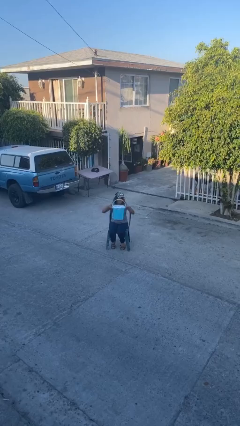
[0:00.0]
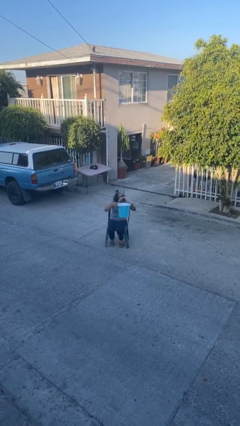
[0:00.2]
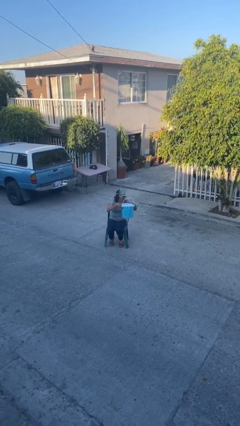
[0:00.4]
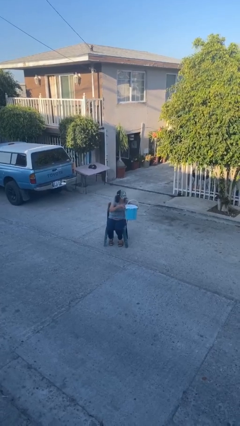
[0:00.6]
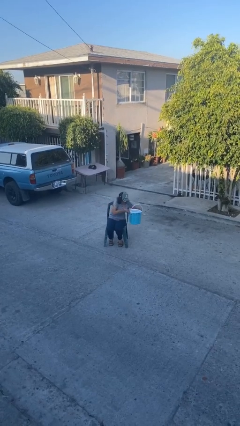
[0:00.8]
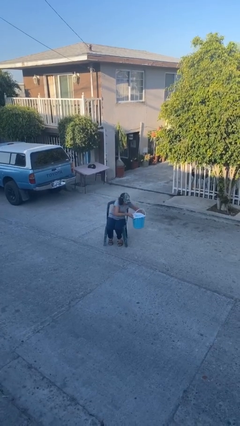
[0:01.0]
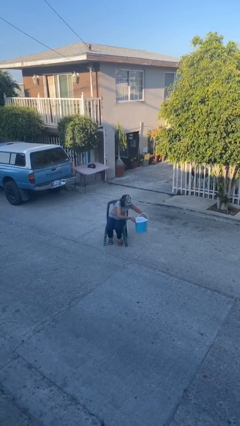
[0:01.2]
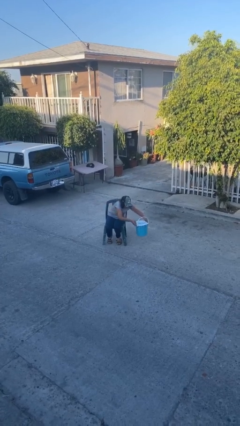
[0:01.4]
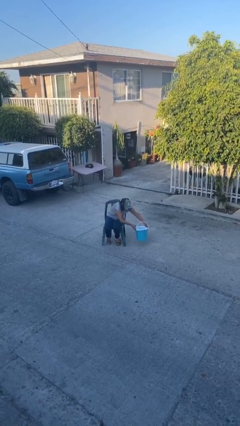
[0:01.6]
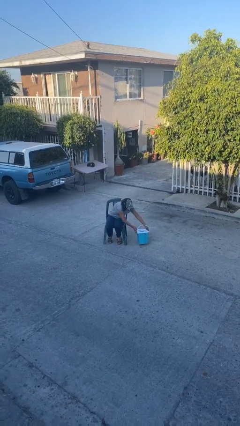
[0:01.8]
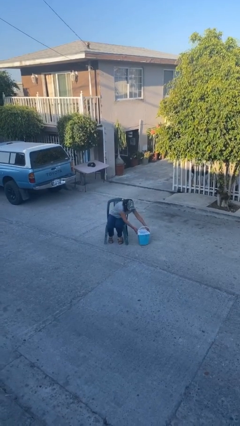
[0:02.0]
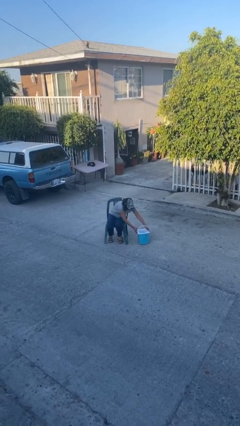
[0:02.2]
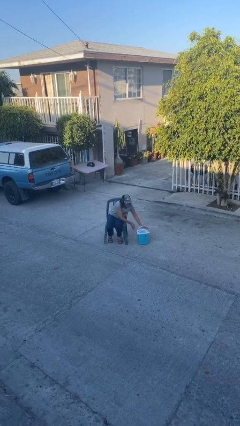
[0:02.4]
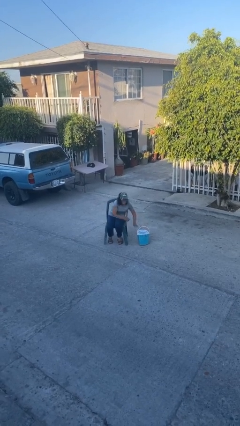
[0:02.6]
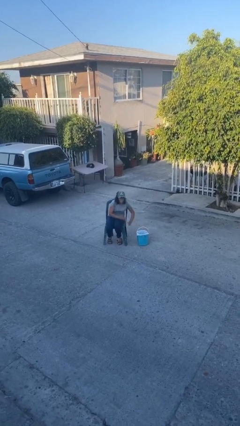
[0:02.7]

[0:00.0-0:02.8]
person puts down object on floor

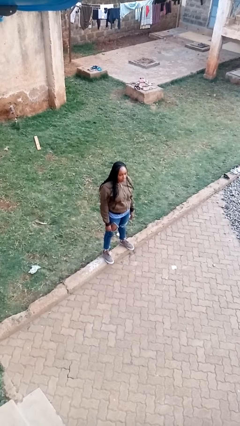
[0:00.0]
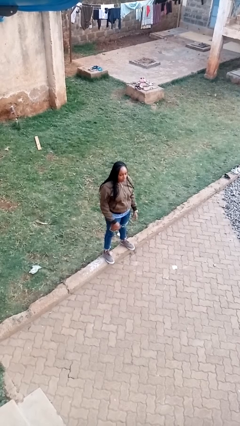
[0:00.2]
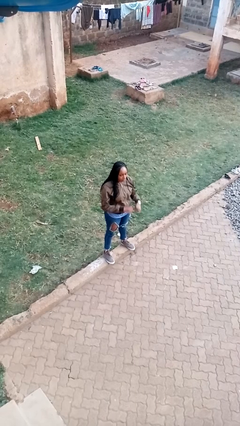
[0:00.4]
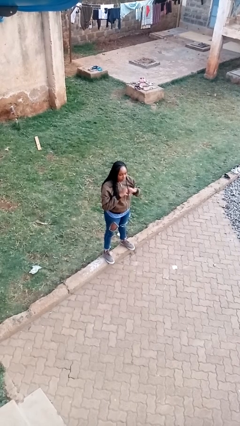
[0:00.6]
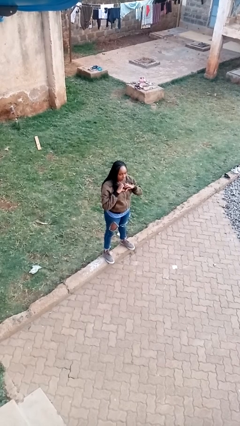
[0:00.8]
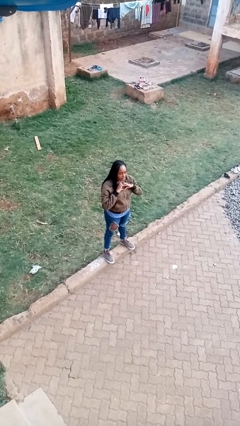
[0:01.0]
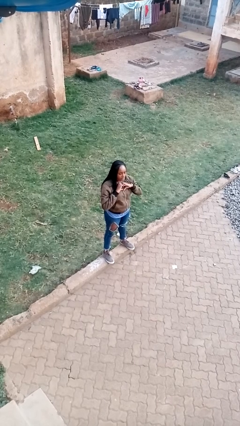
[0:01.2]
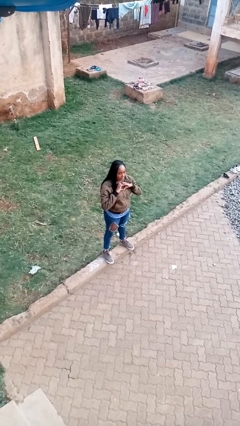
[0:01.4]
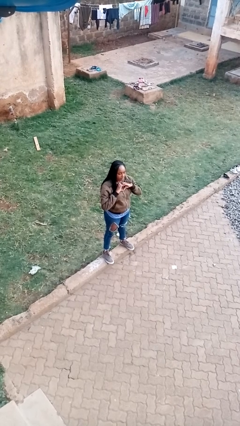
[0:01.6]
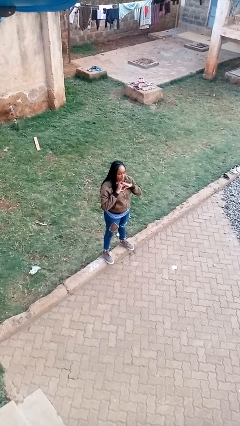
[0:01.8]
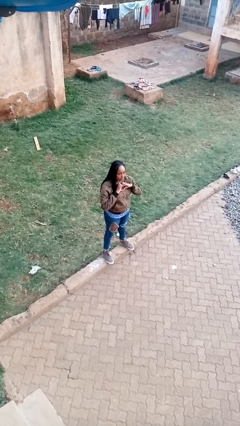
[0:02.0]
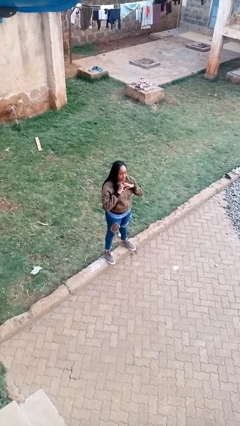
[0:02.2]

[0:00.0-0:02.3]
person gestures heart

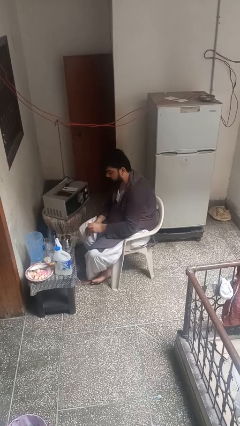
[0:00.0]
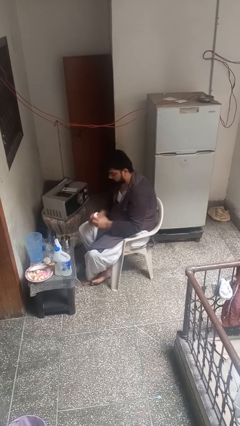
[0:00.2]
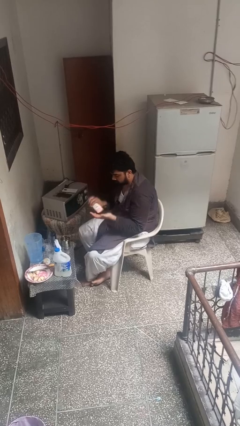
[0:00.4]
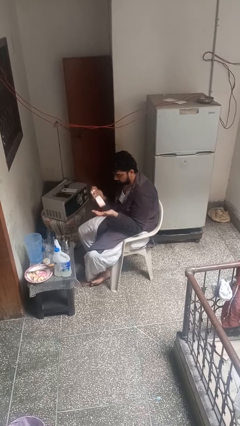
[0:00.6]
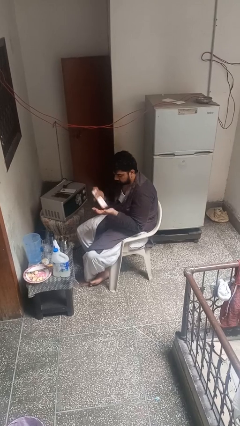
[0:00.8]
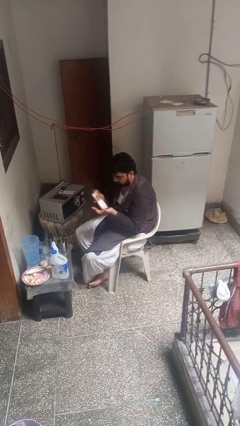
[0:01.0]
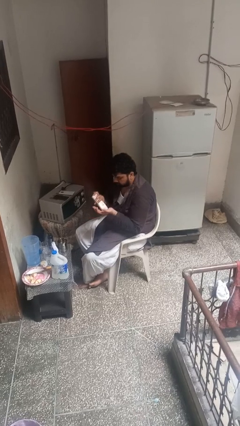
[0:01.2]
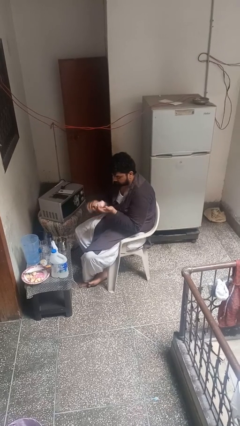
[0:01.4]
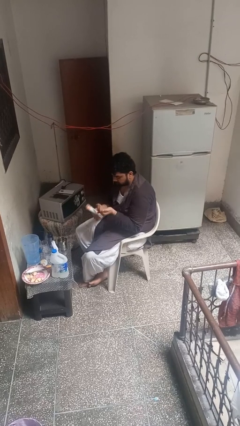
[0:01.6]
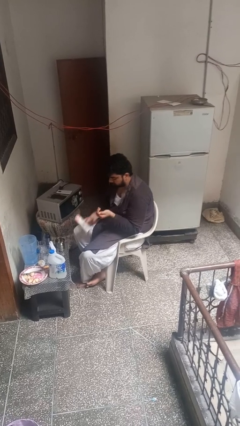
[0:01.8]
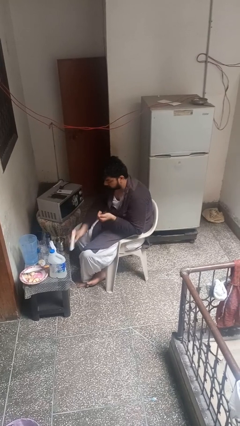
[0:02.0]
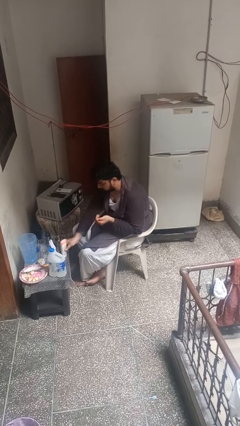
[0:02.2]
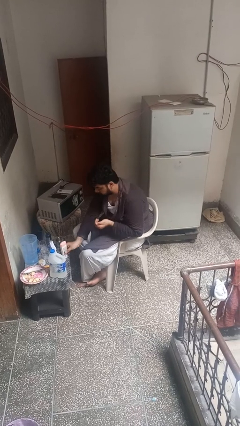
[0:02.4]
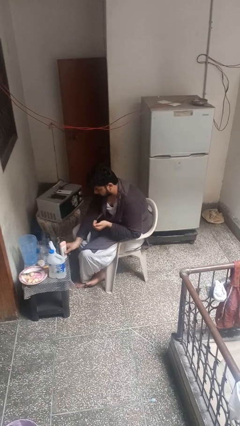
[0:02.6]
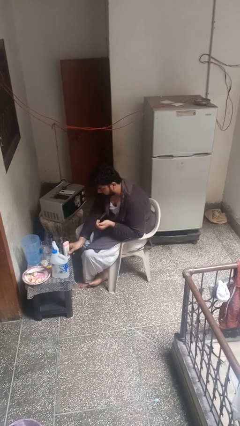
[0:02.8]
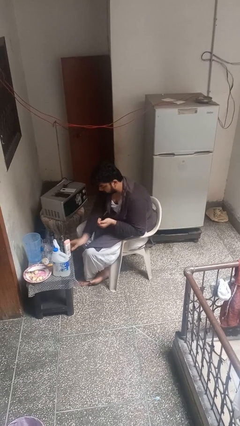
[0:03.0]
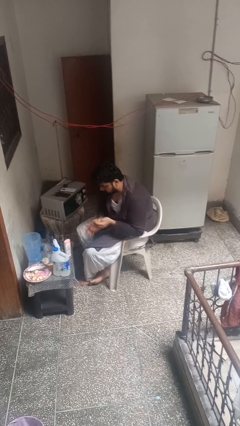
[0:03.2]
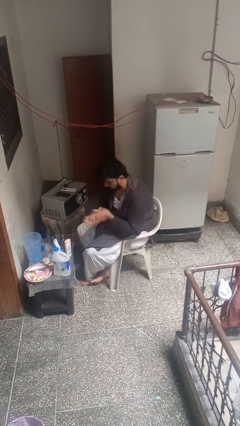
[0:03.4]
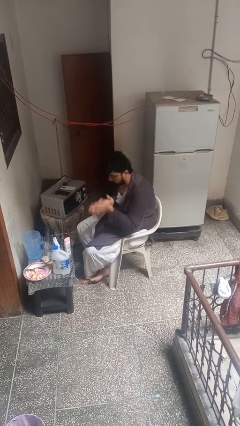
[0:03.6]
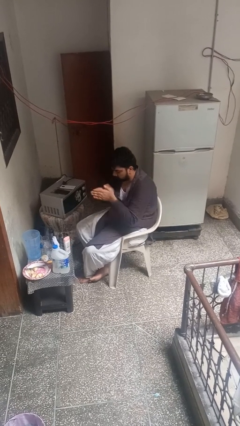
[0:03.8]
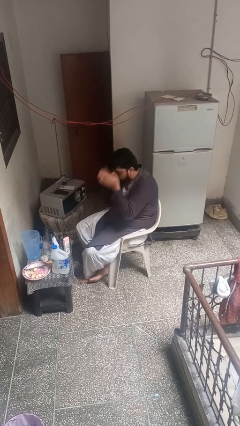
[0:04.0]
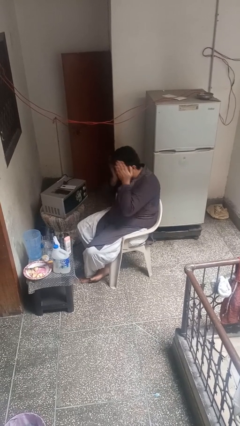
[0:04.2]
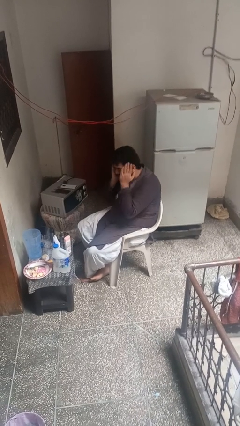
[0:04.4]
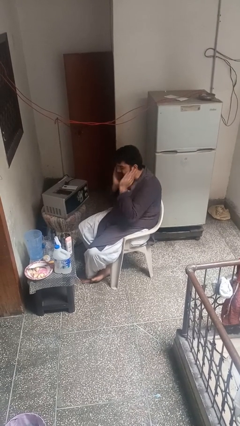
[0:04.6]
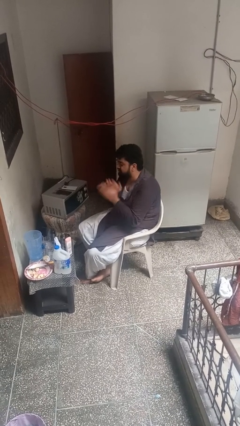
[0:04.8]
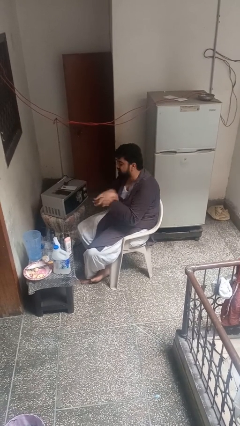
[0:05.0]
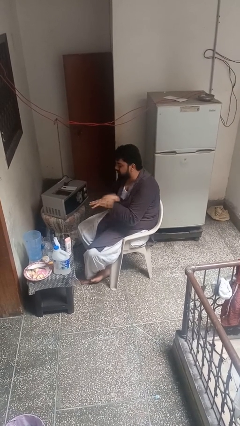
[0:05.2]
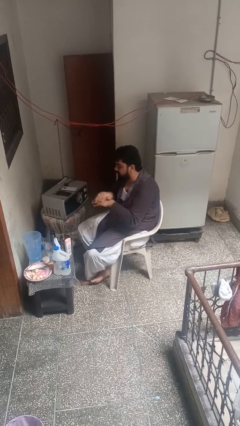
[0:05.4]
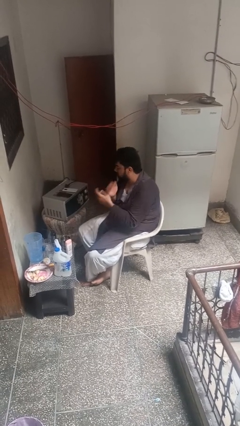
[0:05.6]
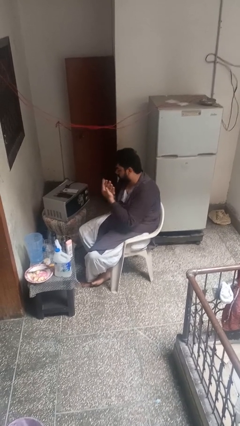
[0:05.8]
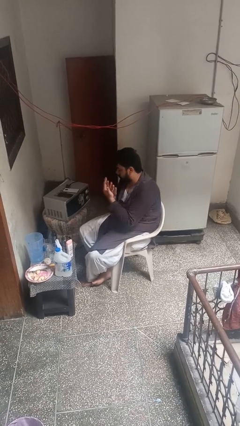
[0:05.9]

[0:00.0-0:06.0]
person applies facial moisturizer

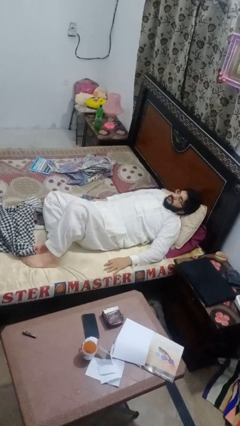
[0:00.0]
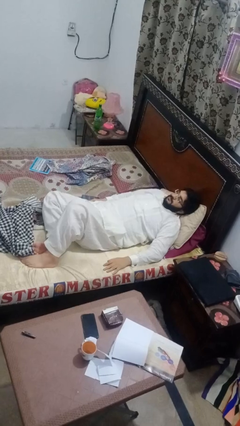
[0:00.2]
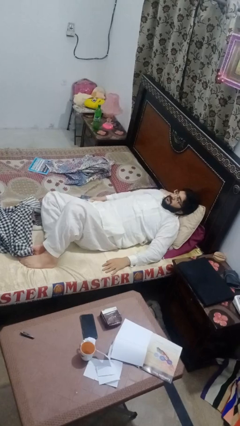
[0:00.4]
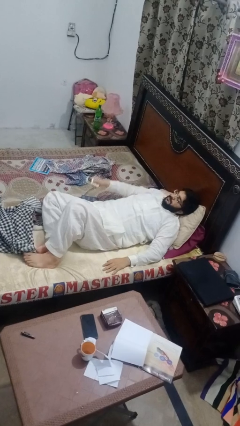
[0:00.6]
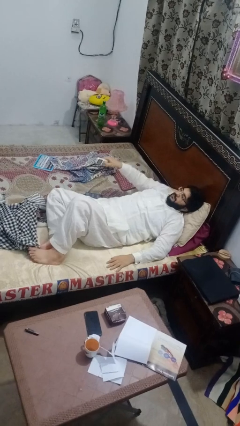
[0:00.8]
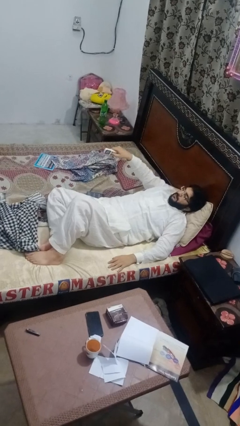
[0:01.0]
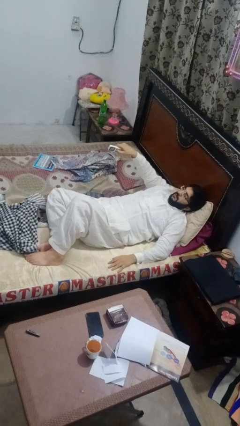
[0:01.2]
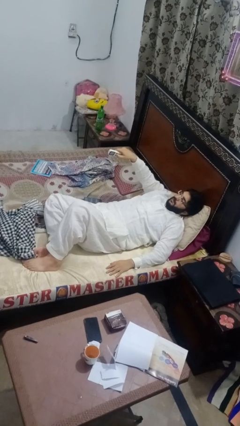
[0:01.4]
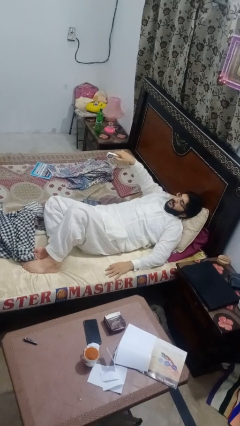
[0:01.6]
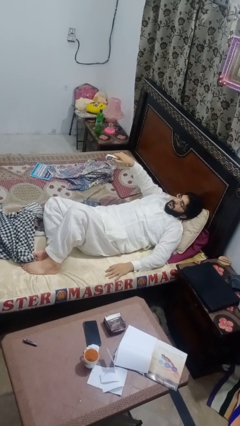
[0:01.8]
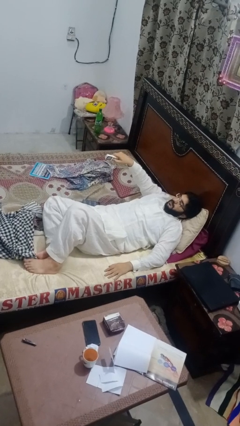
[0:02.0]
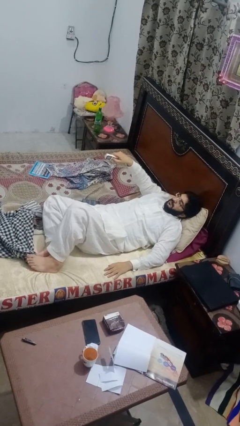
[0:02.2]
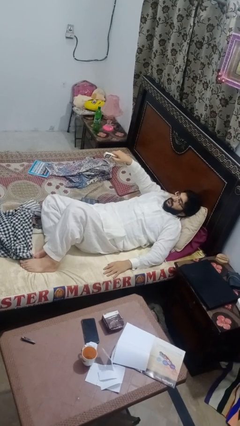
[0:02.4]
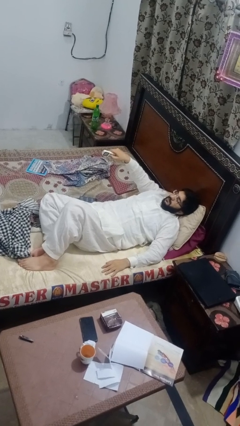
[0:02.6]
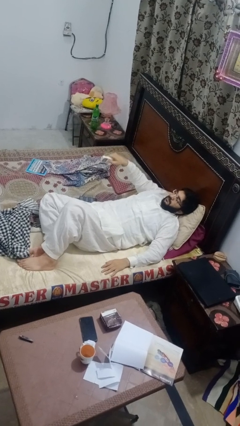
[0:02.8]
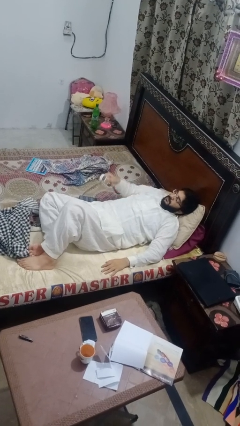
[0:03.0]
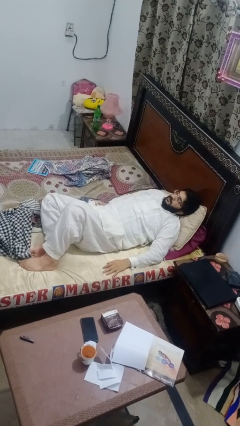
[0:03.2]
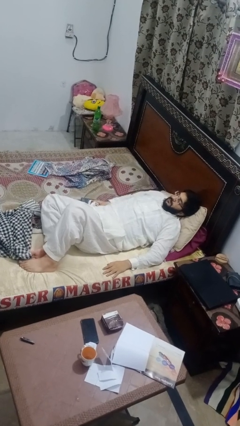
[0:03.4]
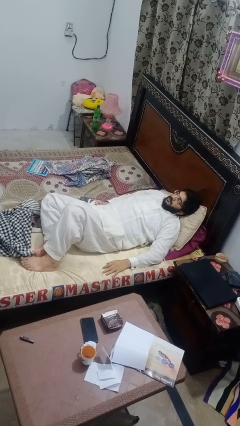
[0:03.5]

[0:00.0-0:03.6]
person uses television remote

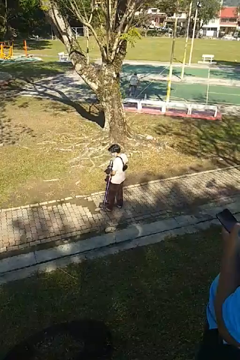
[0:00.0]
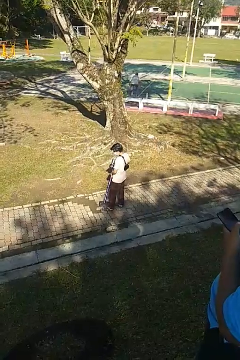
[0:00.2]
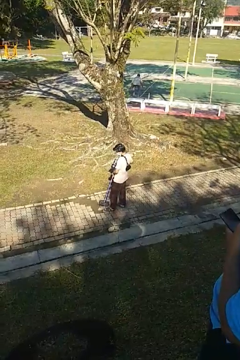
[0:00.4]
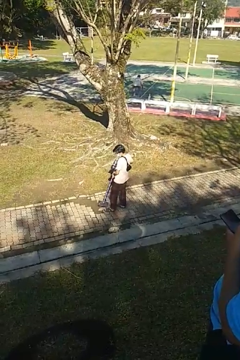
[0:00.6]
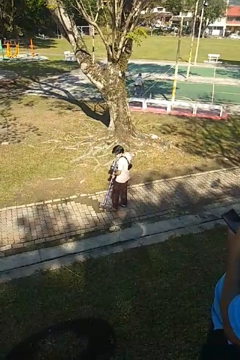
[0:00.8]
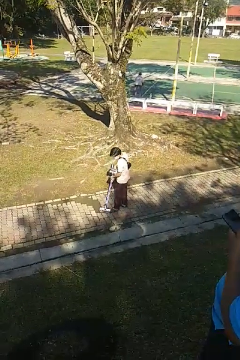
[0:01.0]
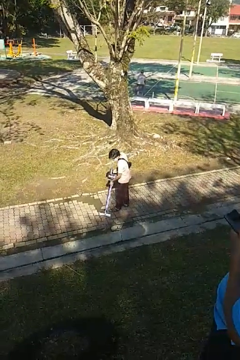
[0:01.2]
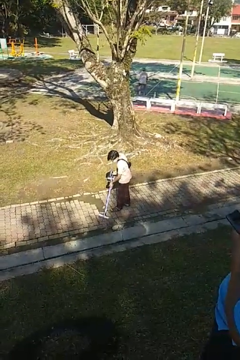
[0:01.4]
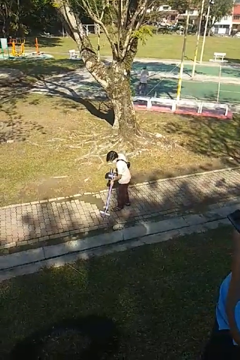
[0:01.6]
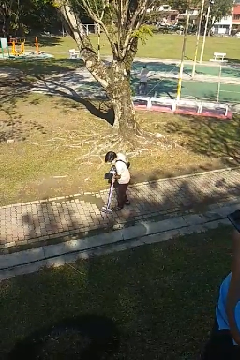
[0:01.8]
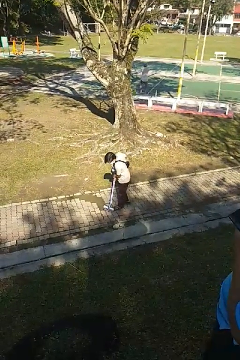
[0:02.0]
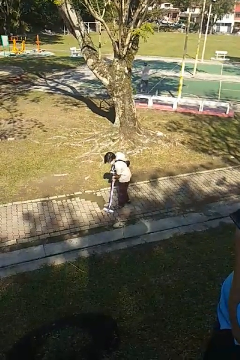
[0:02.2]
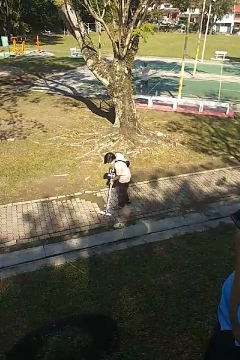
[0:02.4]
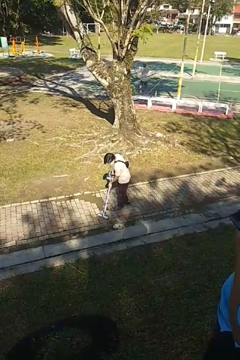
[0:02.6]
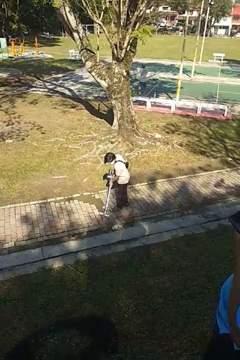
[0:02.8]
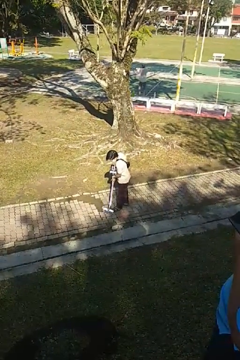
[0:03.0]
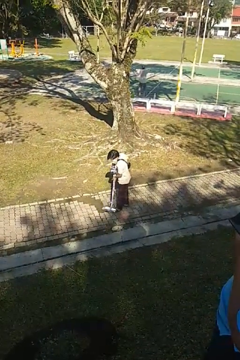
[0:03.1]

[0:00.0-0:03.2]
person vacuums carpet
